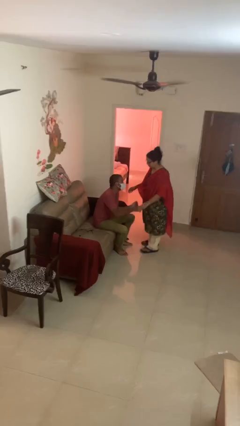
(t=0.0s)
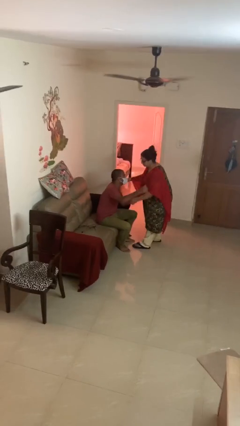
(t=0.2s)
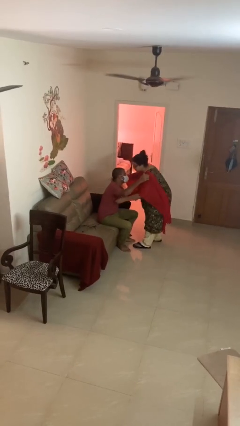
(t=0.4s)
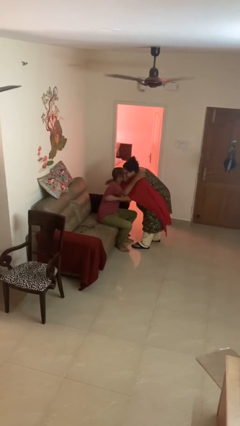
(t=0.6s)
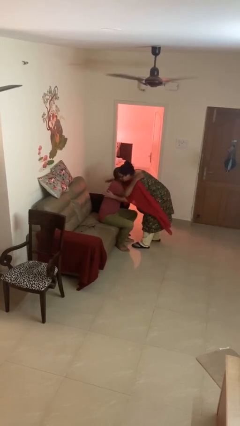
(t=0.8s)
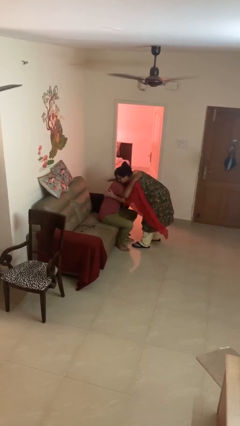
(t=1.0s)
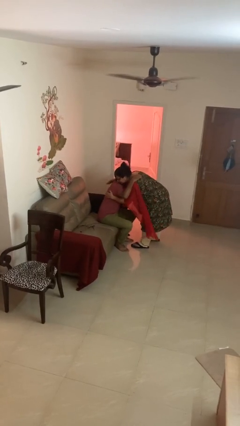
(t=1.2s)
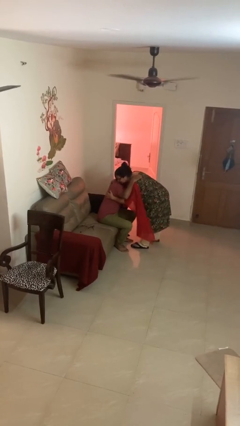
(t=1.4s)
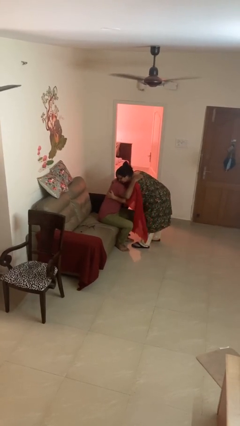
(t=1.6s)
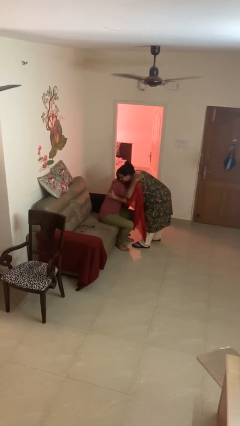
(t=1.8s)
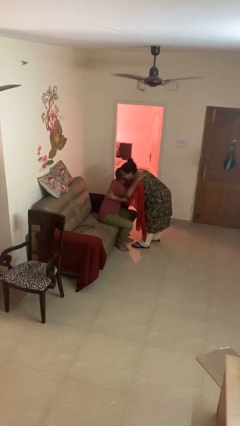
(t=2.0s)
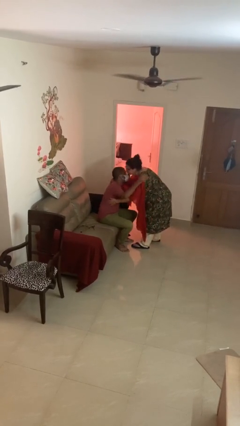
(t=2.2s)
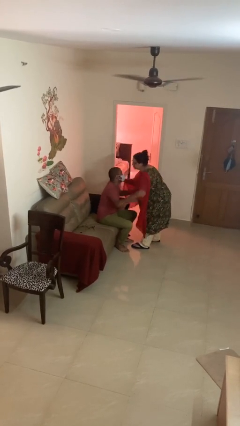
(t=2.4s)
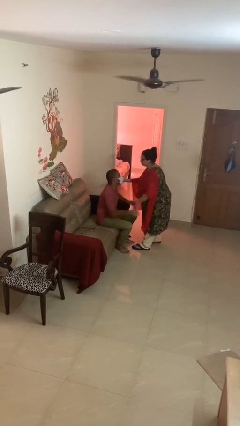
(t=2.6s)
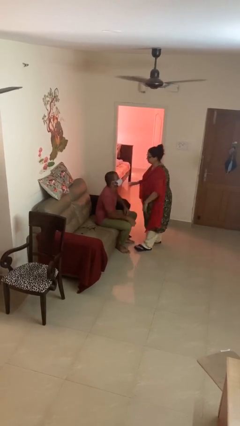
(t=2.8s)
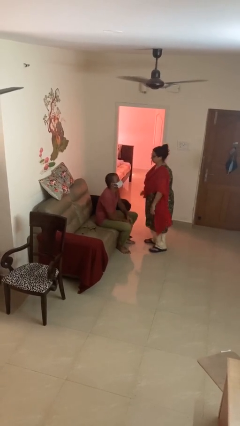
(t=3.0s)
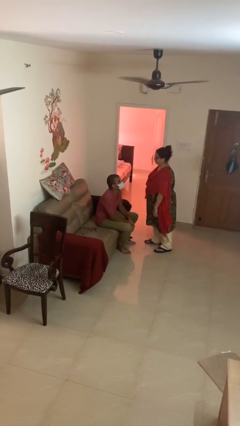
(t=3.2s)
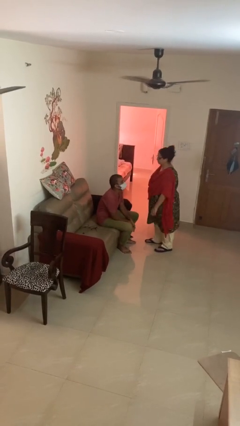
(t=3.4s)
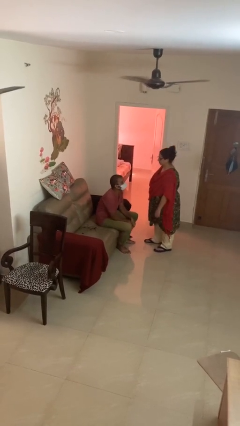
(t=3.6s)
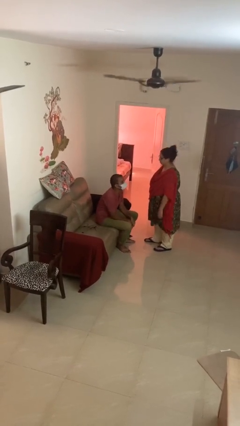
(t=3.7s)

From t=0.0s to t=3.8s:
person embraces person

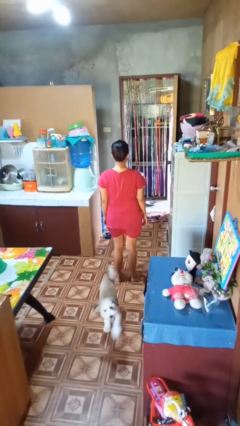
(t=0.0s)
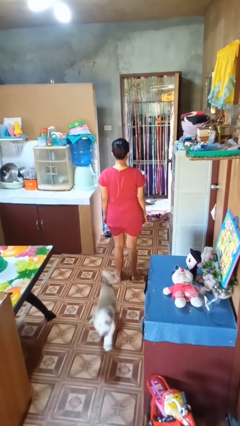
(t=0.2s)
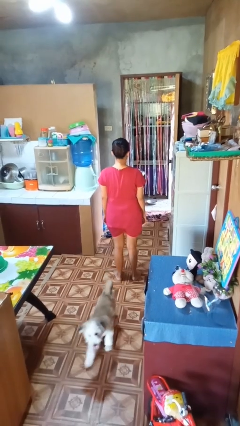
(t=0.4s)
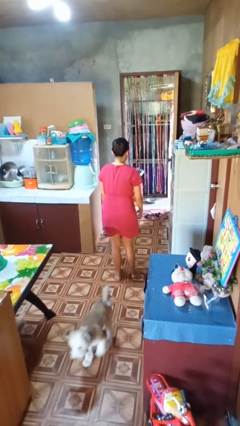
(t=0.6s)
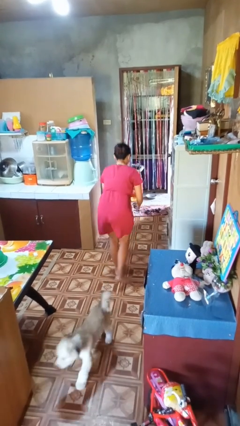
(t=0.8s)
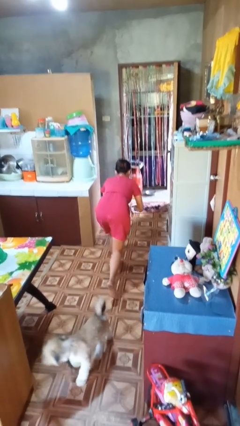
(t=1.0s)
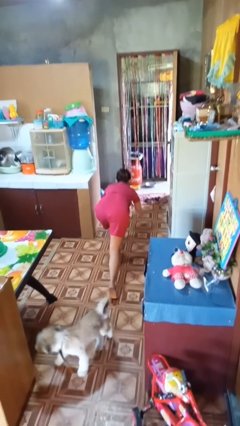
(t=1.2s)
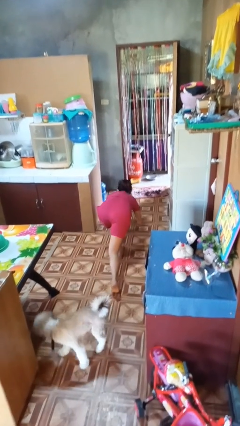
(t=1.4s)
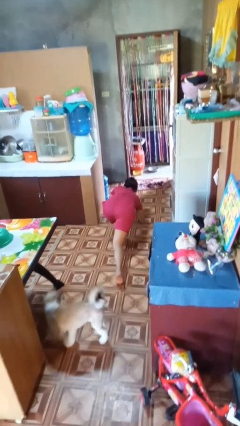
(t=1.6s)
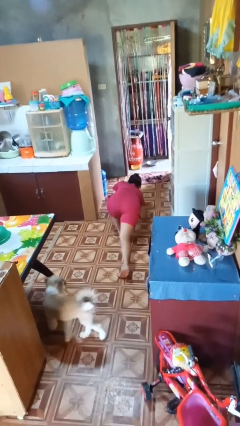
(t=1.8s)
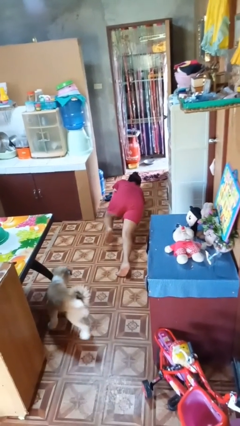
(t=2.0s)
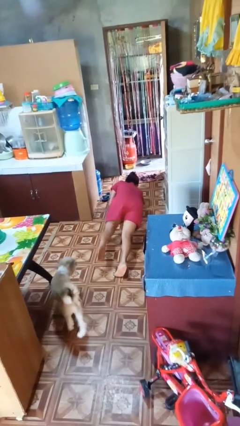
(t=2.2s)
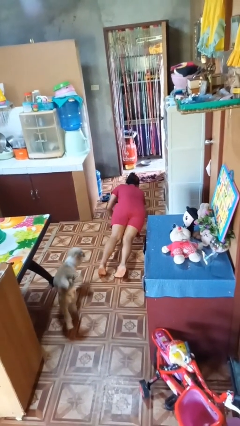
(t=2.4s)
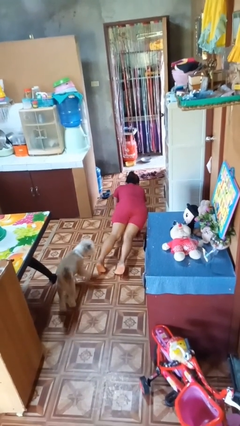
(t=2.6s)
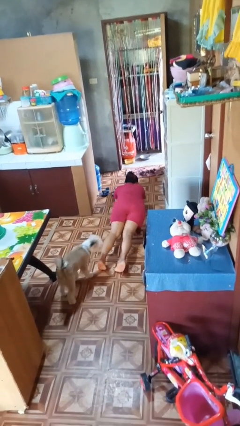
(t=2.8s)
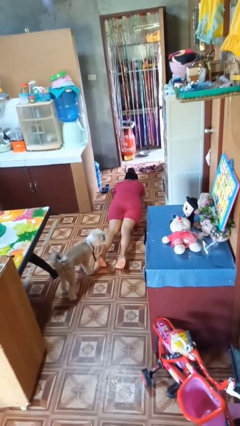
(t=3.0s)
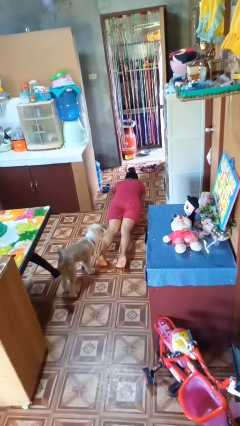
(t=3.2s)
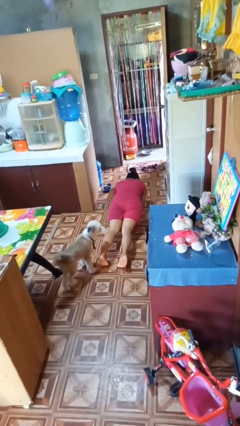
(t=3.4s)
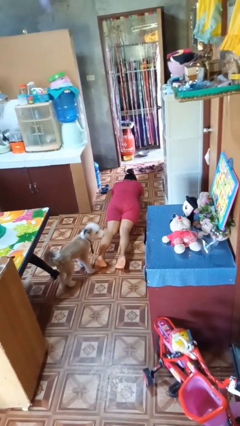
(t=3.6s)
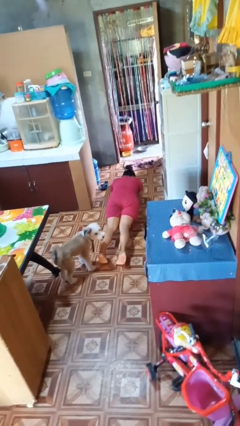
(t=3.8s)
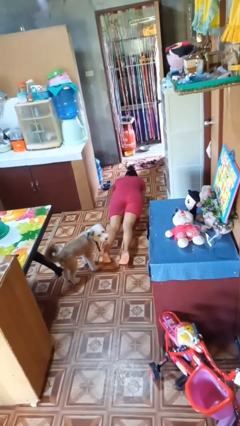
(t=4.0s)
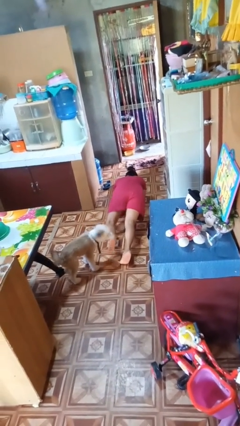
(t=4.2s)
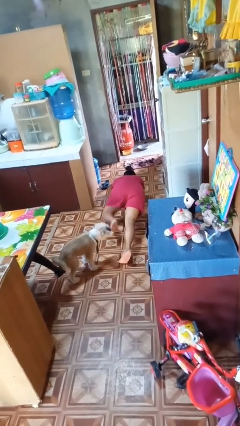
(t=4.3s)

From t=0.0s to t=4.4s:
person exercises with plank

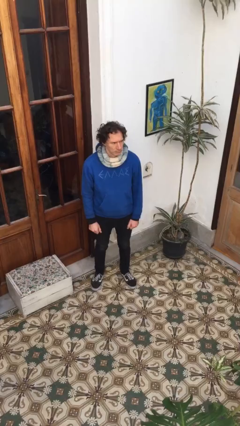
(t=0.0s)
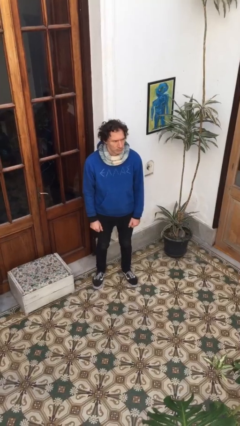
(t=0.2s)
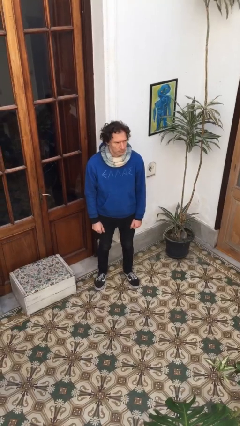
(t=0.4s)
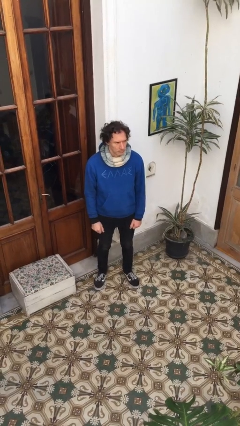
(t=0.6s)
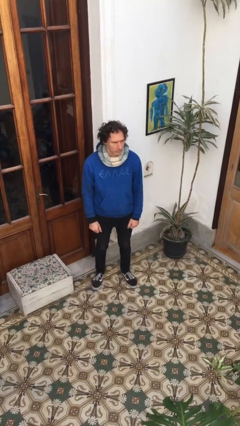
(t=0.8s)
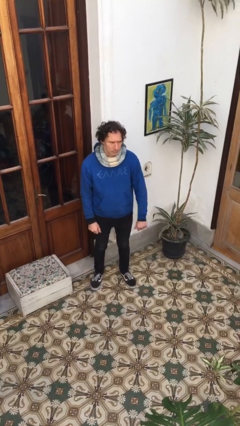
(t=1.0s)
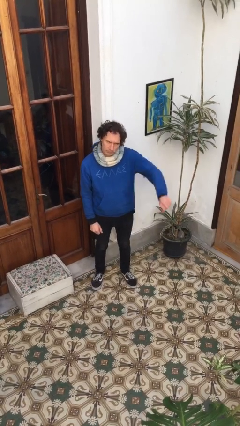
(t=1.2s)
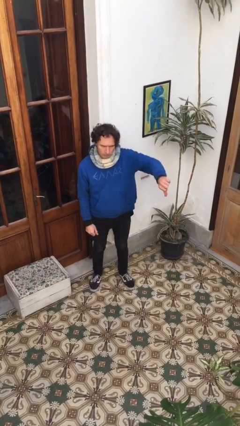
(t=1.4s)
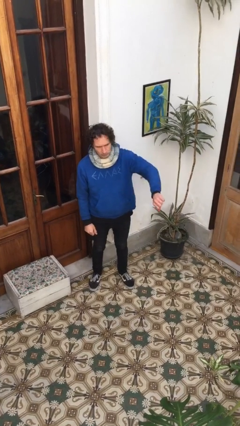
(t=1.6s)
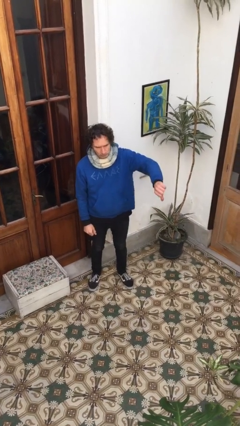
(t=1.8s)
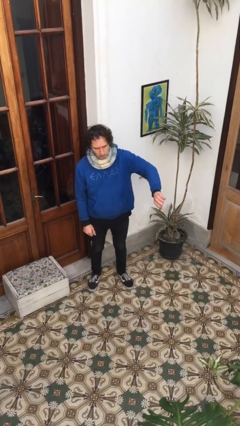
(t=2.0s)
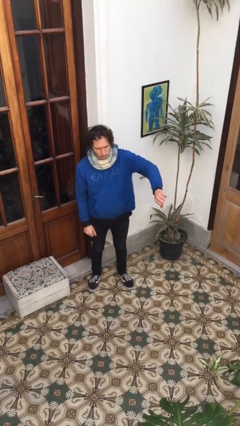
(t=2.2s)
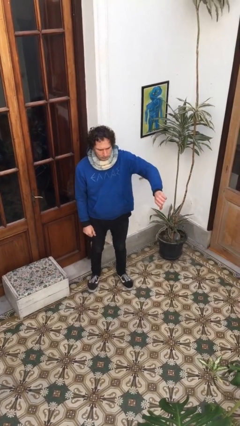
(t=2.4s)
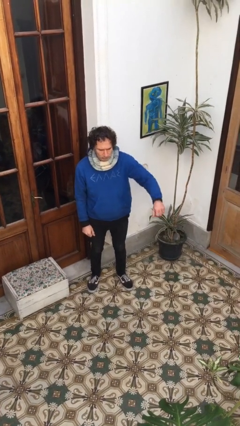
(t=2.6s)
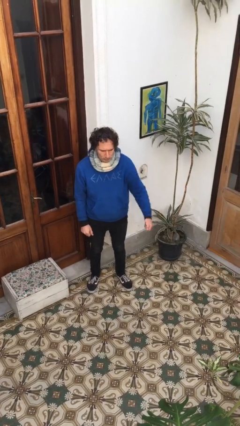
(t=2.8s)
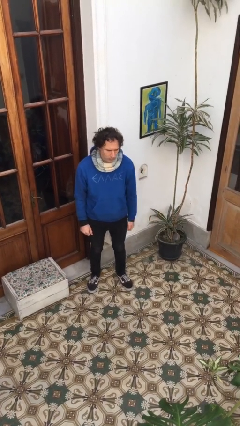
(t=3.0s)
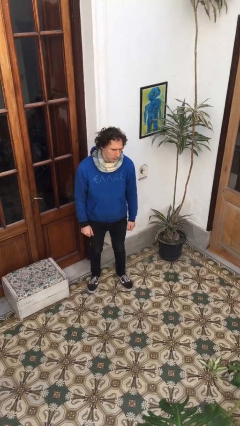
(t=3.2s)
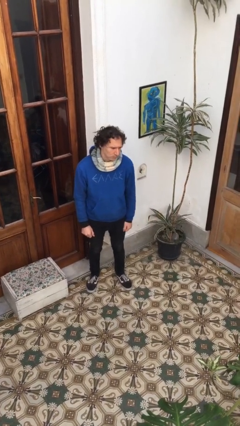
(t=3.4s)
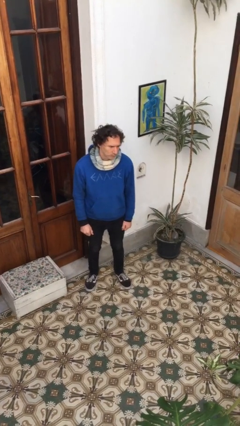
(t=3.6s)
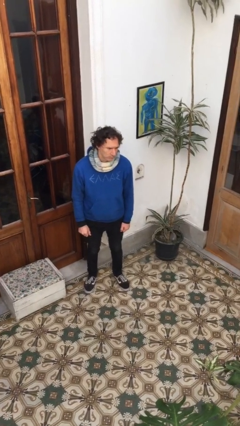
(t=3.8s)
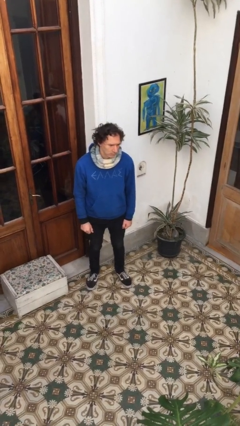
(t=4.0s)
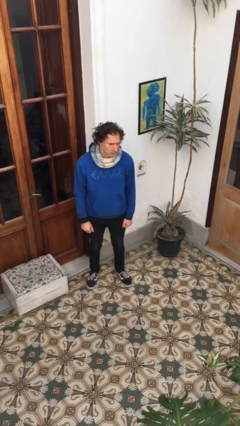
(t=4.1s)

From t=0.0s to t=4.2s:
person gestures thumbs down

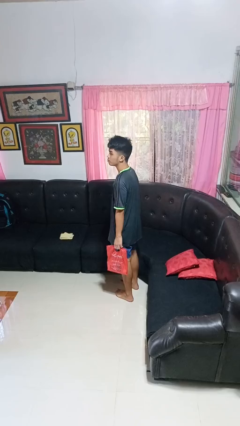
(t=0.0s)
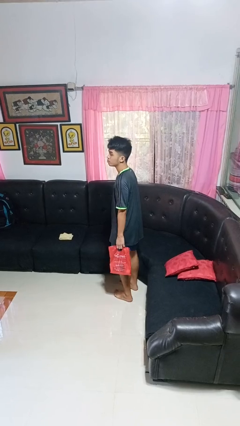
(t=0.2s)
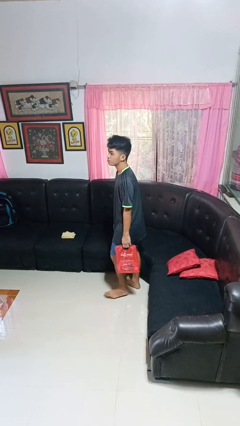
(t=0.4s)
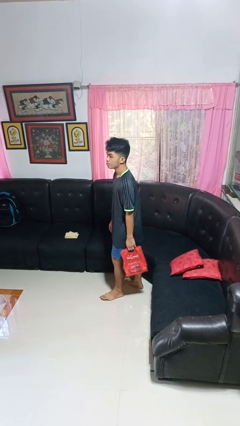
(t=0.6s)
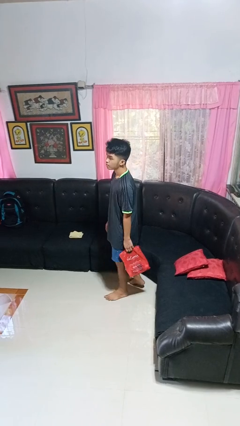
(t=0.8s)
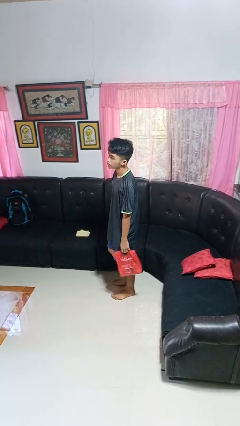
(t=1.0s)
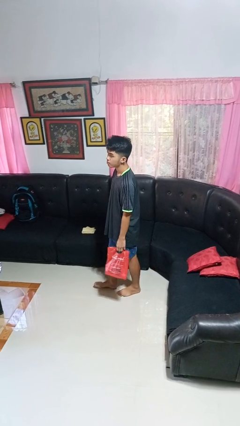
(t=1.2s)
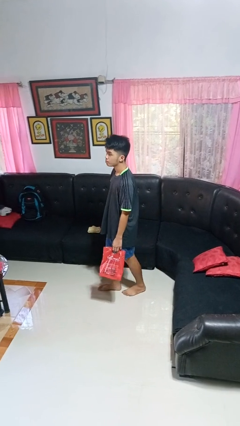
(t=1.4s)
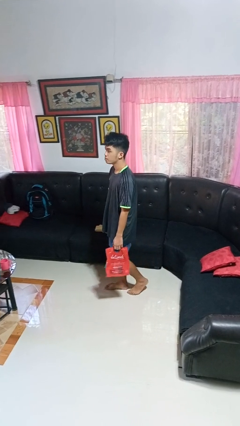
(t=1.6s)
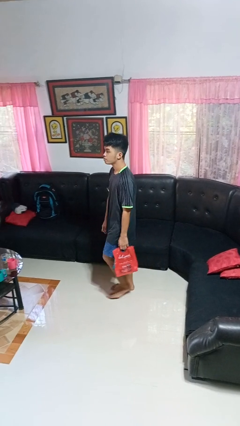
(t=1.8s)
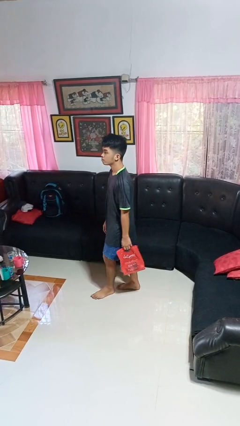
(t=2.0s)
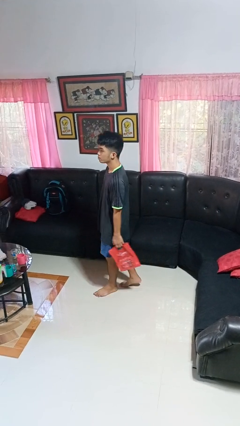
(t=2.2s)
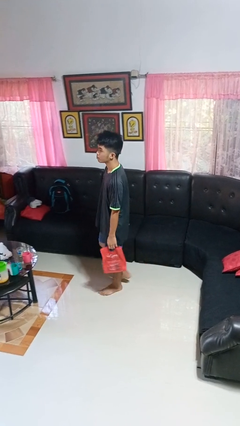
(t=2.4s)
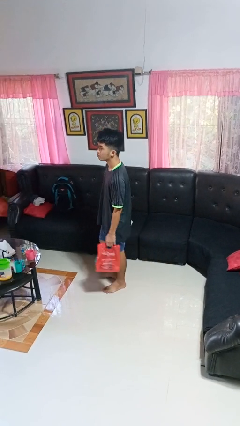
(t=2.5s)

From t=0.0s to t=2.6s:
person carries groceries

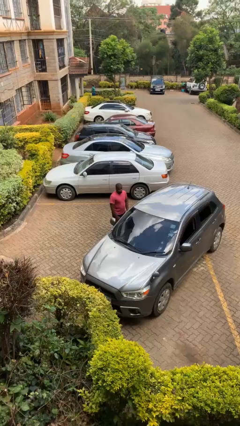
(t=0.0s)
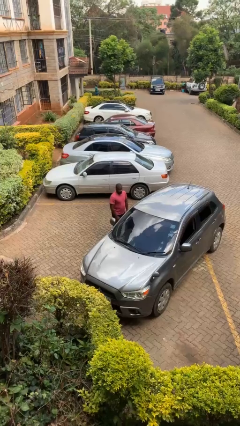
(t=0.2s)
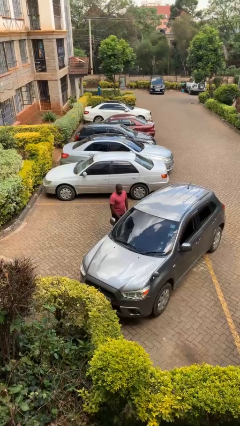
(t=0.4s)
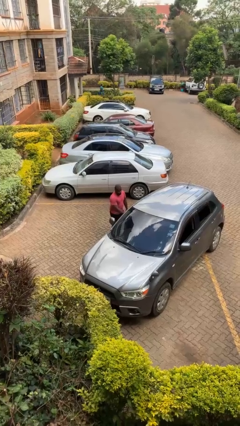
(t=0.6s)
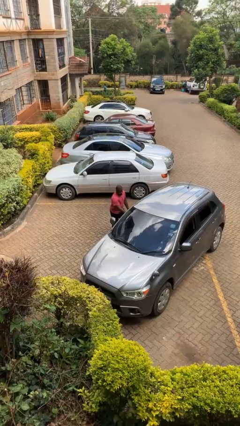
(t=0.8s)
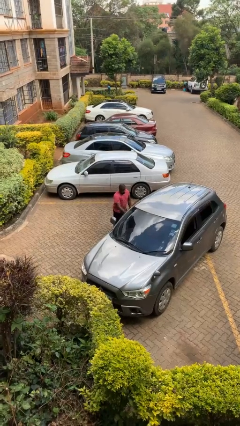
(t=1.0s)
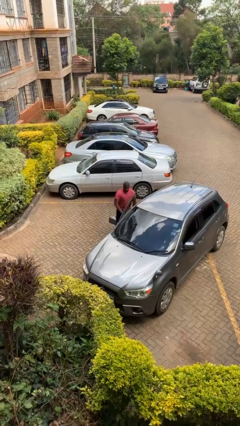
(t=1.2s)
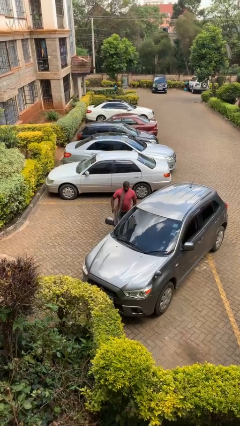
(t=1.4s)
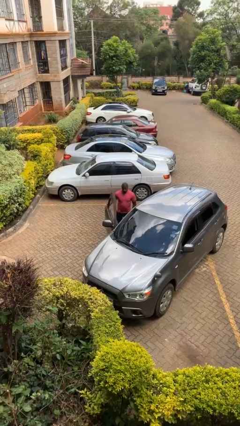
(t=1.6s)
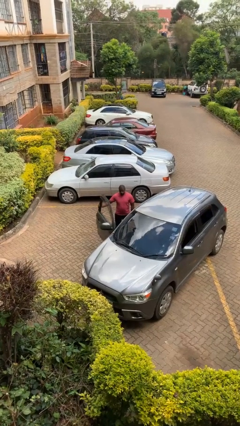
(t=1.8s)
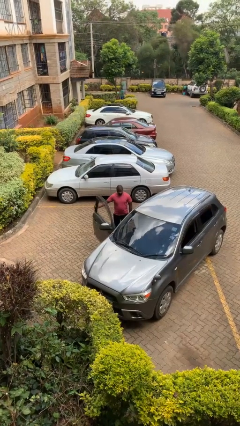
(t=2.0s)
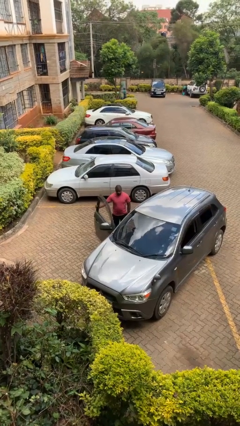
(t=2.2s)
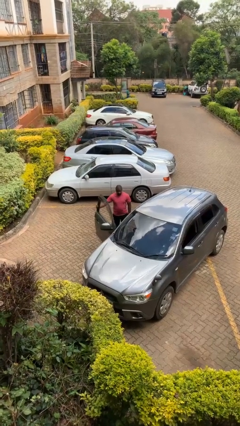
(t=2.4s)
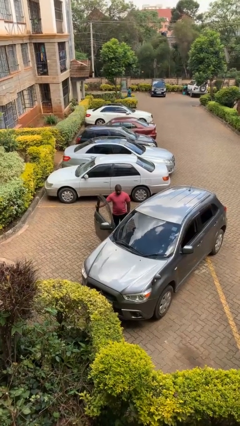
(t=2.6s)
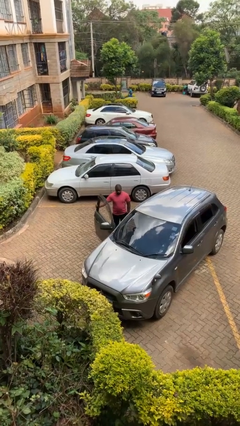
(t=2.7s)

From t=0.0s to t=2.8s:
person opens car door
